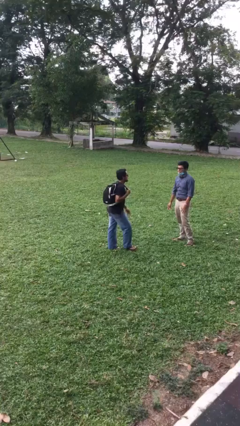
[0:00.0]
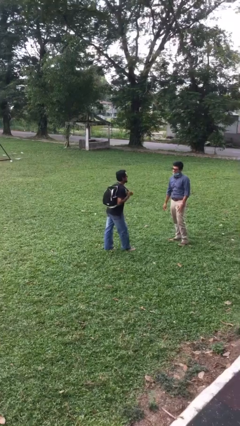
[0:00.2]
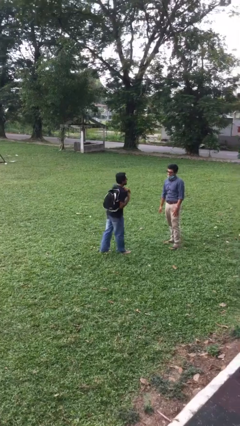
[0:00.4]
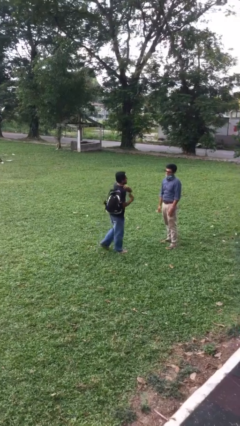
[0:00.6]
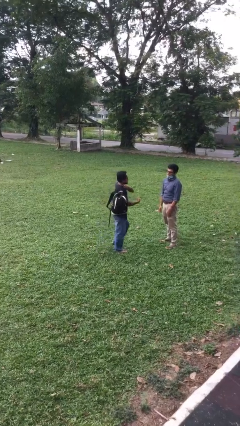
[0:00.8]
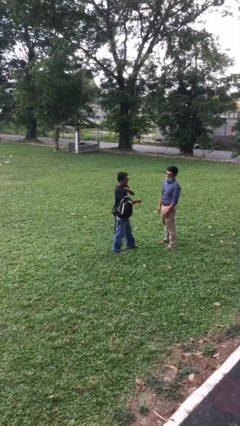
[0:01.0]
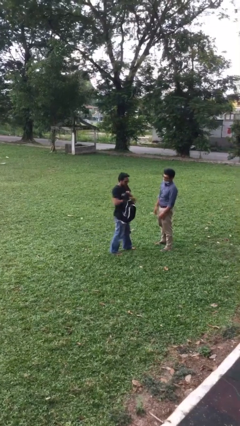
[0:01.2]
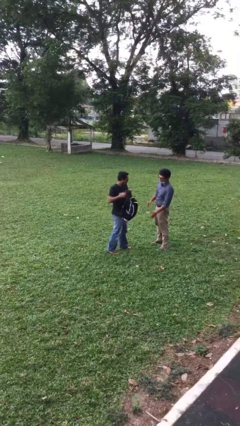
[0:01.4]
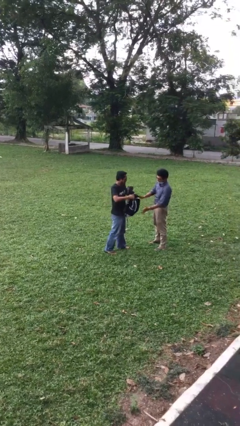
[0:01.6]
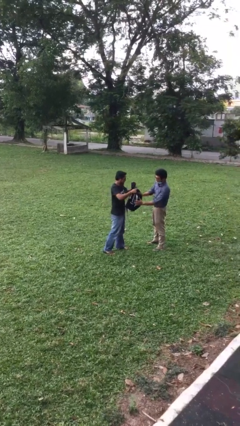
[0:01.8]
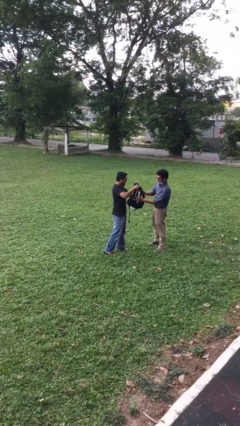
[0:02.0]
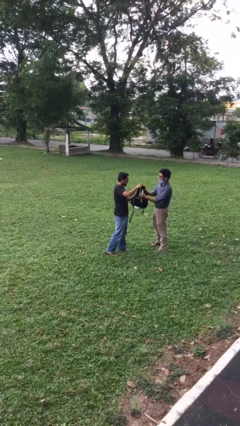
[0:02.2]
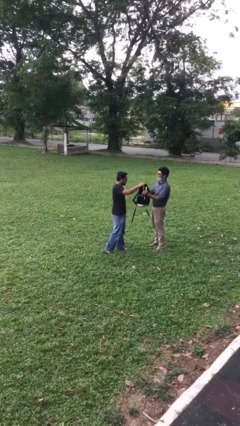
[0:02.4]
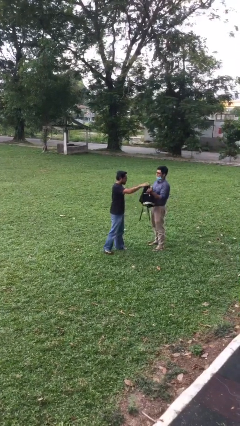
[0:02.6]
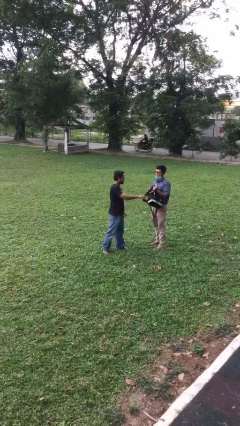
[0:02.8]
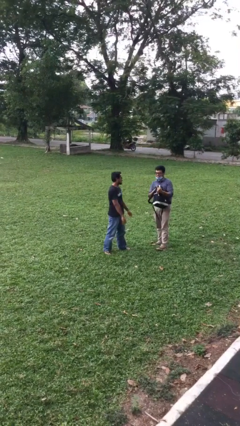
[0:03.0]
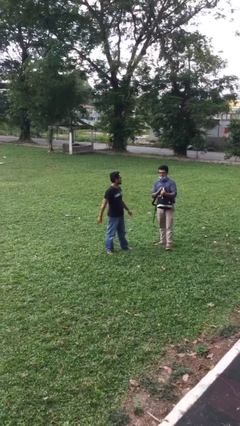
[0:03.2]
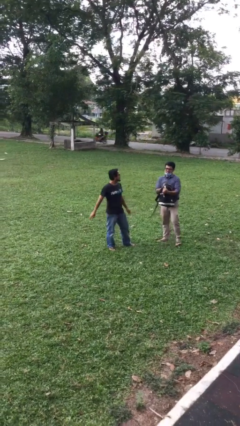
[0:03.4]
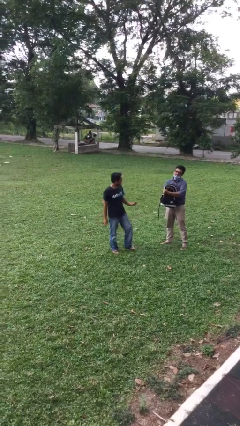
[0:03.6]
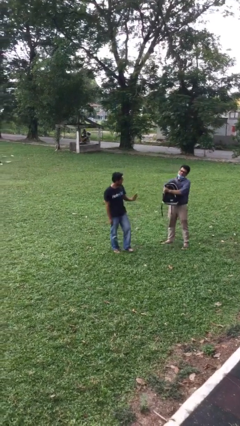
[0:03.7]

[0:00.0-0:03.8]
person transfers object to person

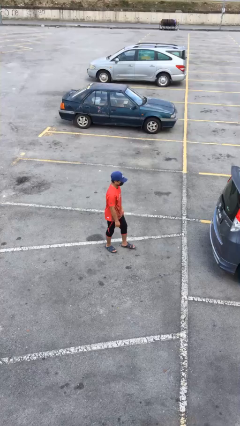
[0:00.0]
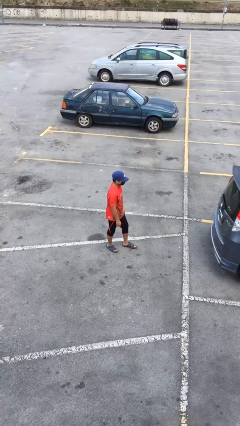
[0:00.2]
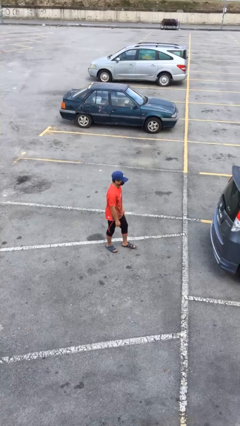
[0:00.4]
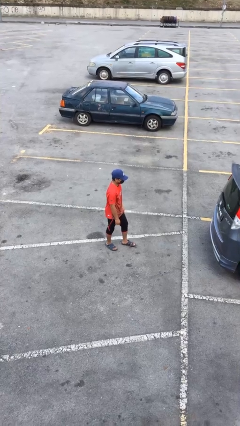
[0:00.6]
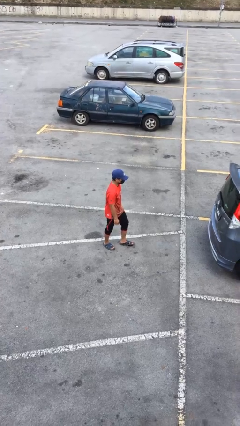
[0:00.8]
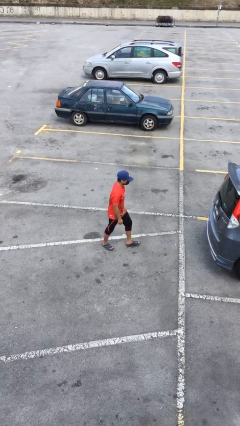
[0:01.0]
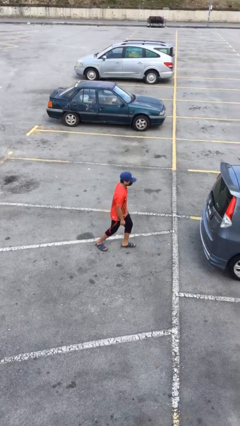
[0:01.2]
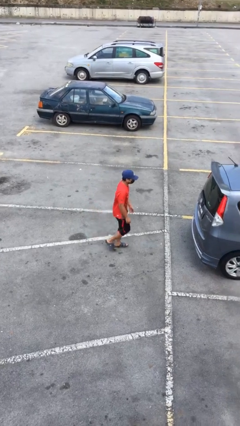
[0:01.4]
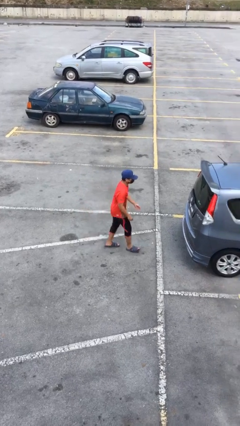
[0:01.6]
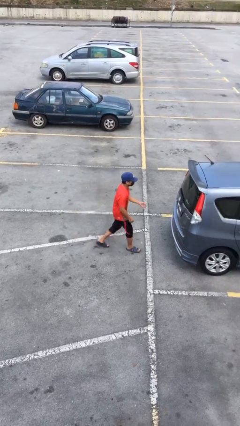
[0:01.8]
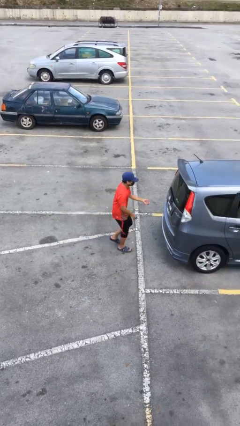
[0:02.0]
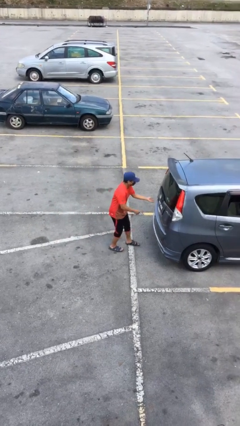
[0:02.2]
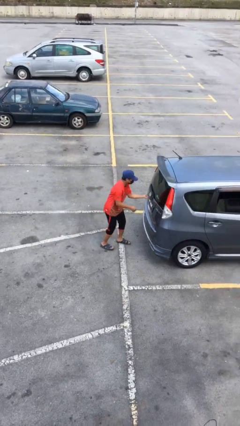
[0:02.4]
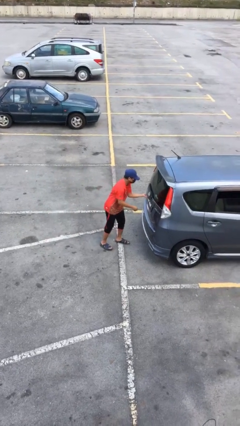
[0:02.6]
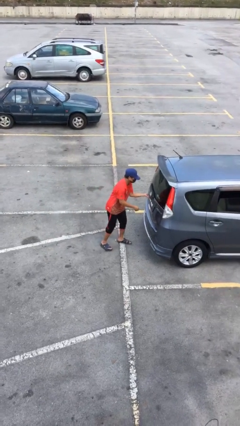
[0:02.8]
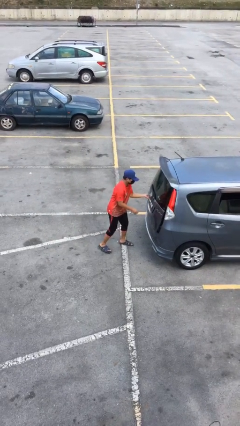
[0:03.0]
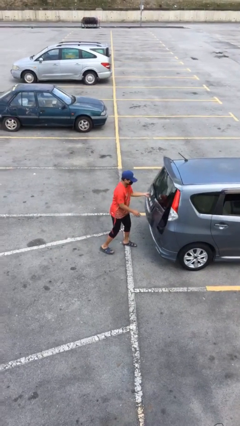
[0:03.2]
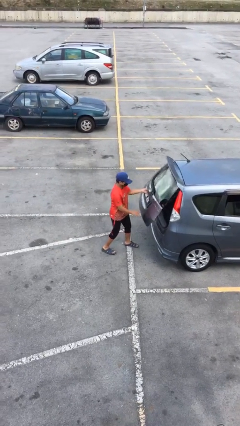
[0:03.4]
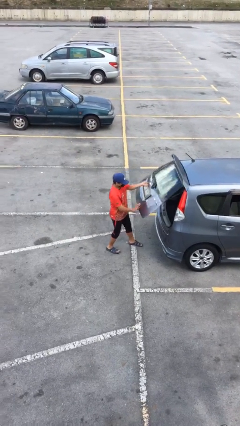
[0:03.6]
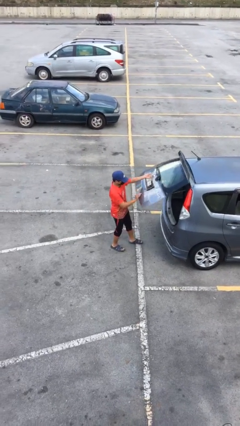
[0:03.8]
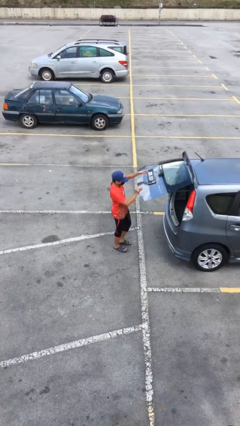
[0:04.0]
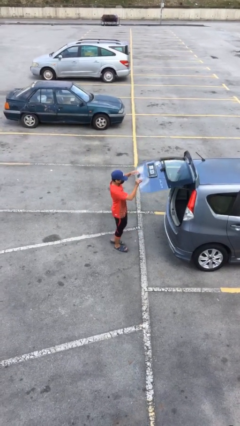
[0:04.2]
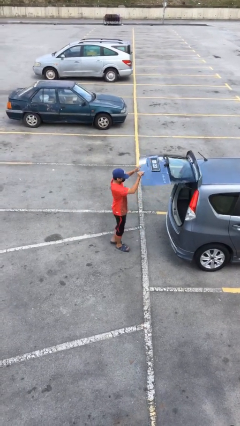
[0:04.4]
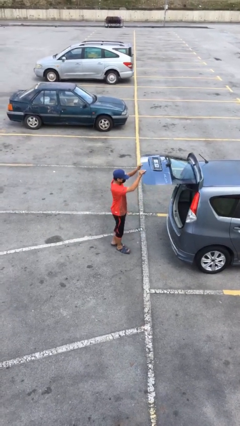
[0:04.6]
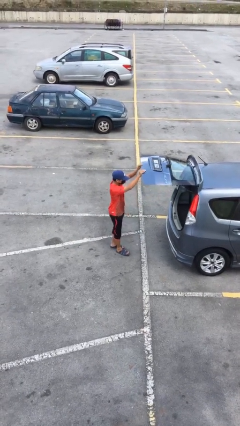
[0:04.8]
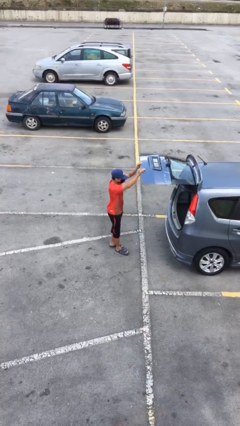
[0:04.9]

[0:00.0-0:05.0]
person opens car trunk

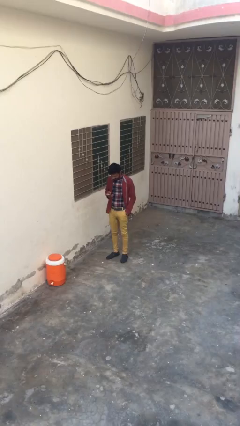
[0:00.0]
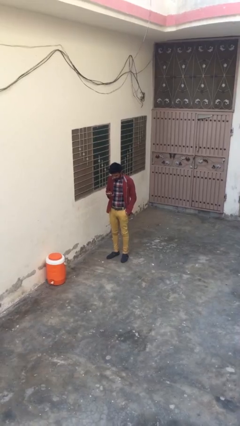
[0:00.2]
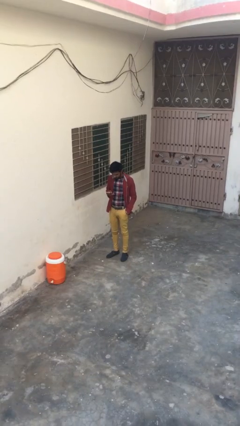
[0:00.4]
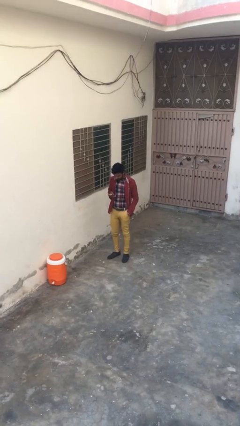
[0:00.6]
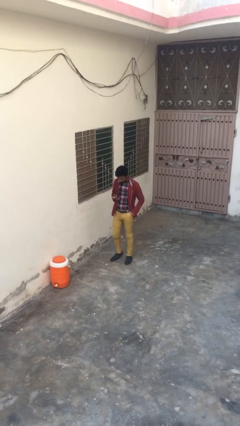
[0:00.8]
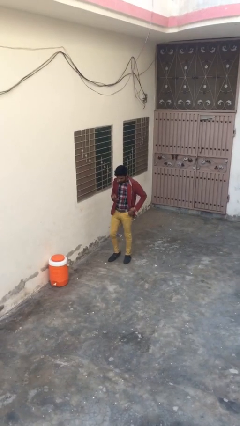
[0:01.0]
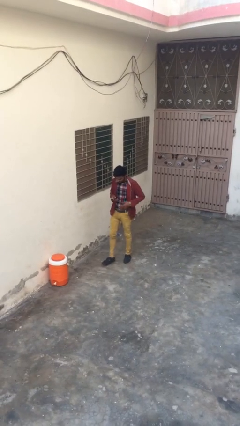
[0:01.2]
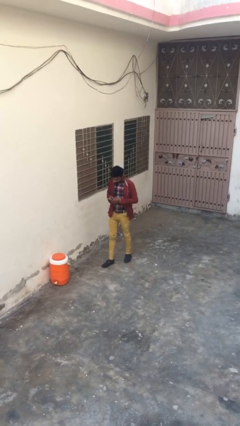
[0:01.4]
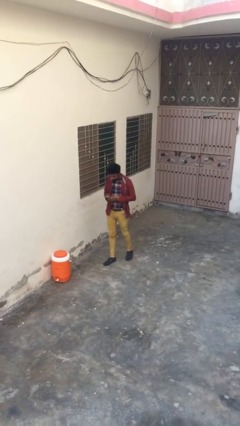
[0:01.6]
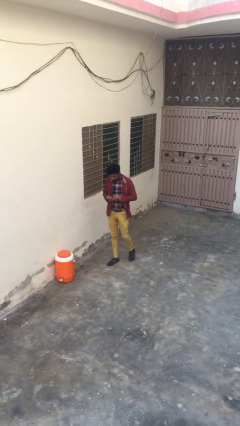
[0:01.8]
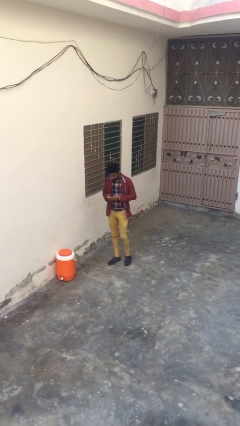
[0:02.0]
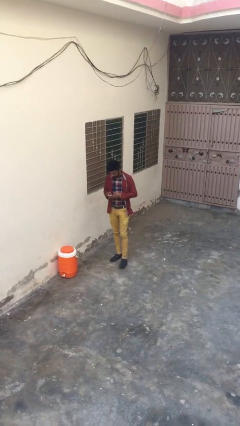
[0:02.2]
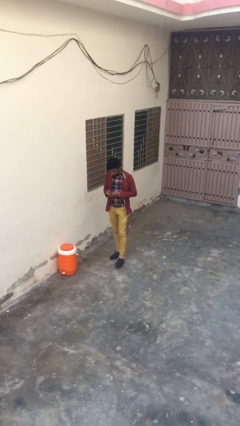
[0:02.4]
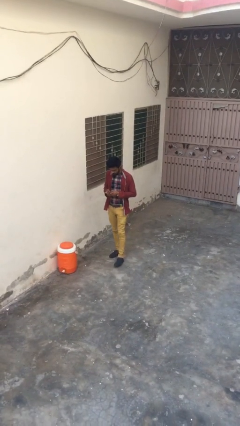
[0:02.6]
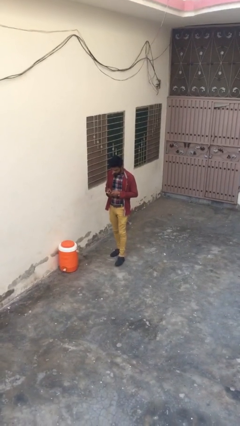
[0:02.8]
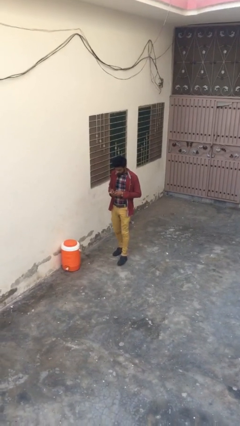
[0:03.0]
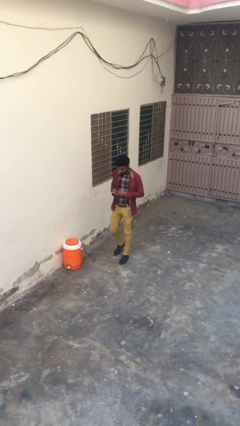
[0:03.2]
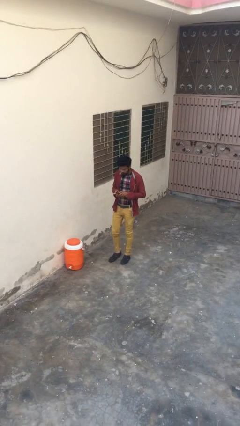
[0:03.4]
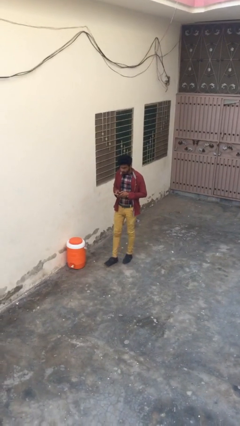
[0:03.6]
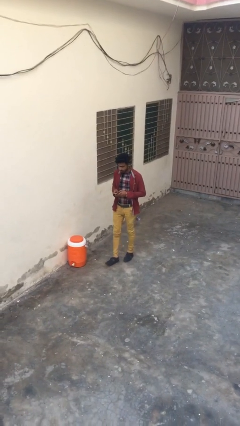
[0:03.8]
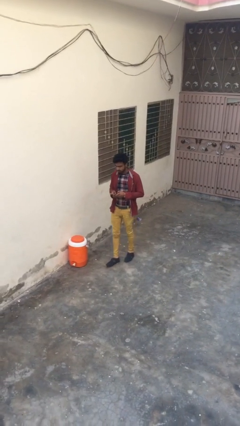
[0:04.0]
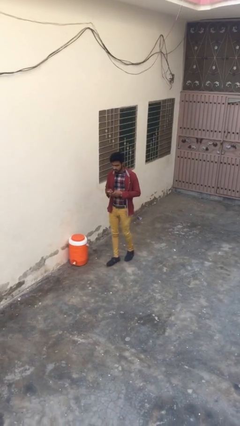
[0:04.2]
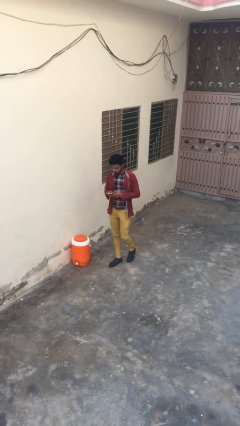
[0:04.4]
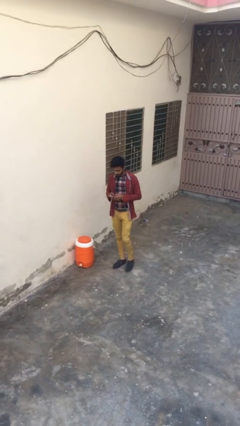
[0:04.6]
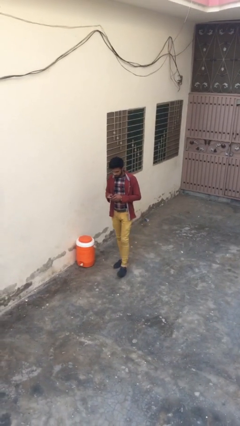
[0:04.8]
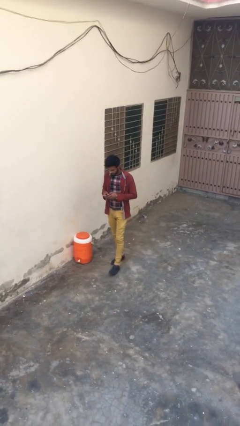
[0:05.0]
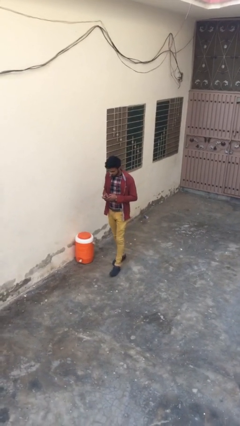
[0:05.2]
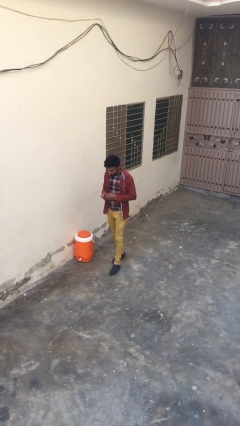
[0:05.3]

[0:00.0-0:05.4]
person texts on phone
